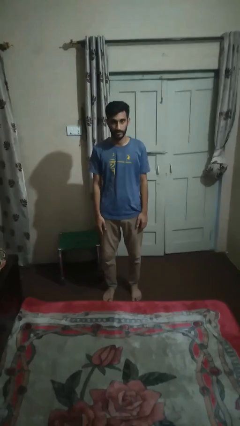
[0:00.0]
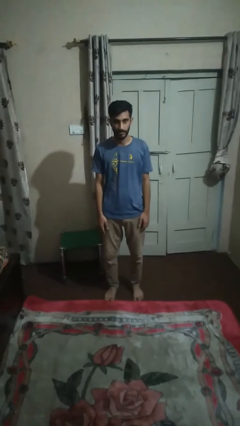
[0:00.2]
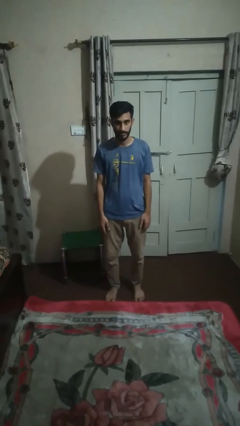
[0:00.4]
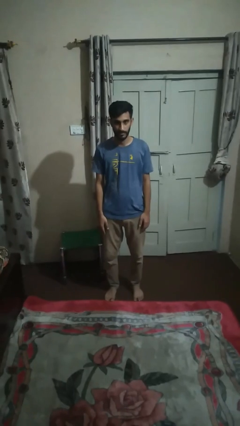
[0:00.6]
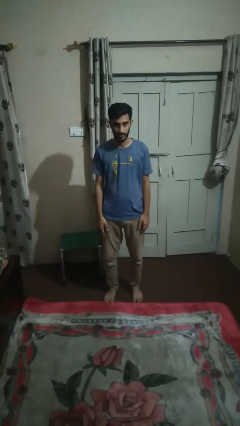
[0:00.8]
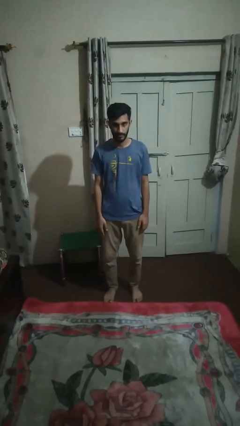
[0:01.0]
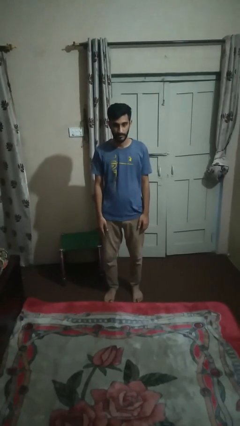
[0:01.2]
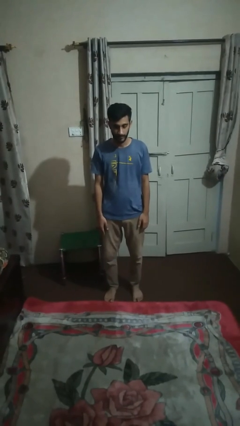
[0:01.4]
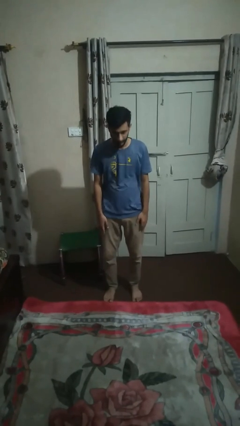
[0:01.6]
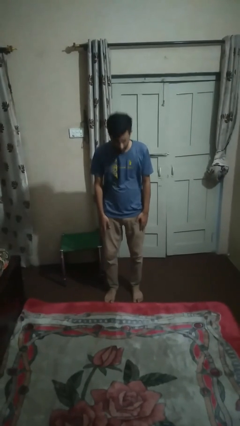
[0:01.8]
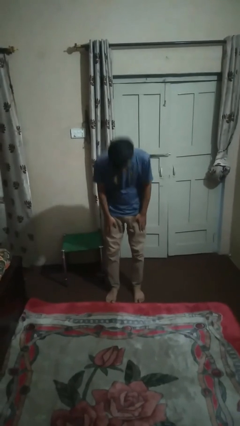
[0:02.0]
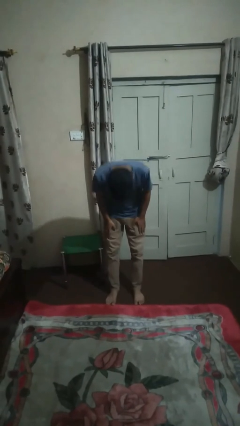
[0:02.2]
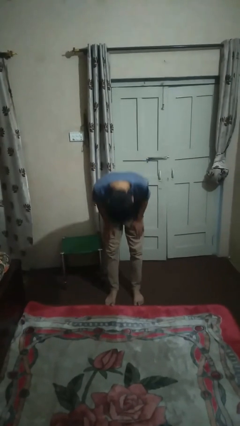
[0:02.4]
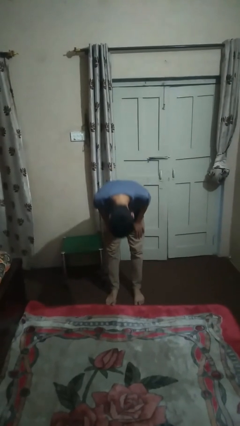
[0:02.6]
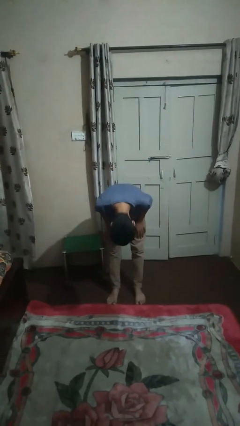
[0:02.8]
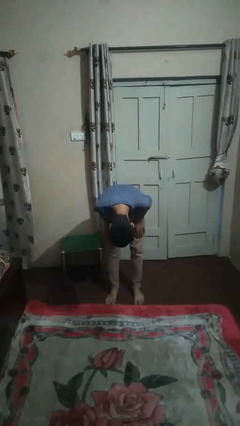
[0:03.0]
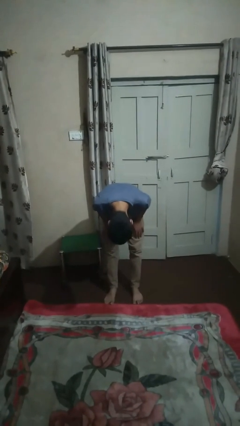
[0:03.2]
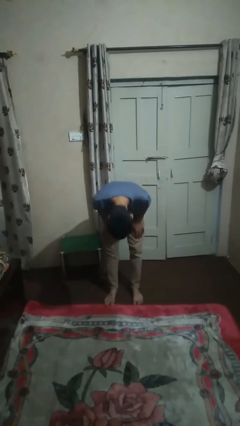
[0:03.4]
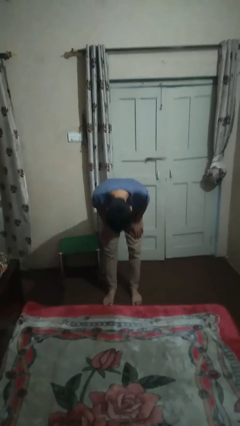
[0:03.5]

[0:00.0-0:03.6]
person bows

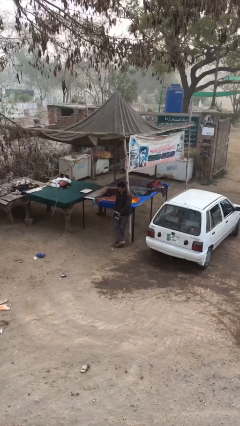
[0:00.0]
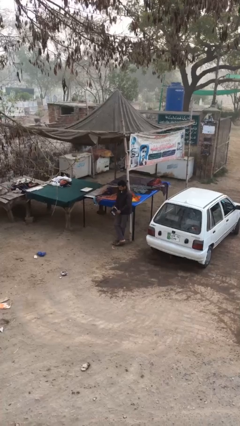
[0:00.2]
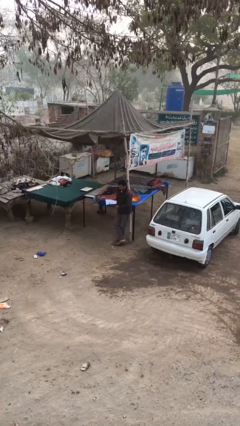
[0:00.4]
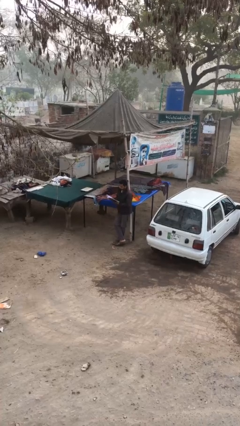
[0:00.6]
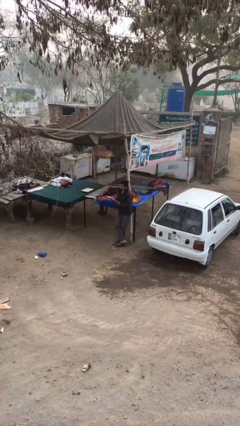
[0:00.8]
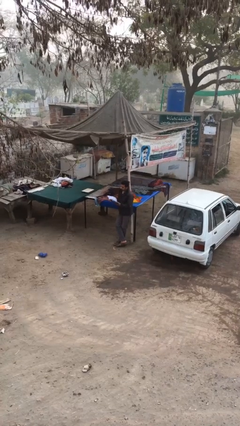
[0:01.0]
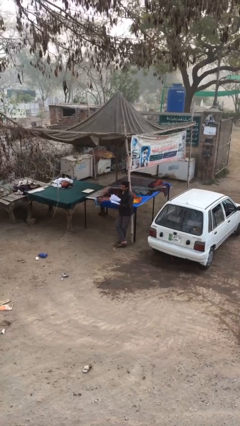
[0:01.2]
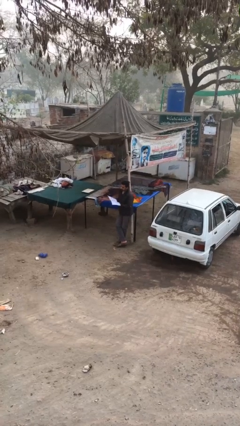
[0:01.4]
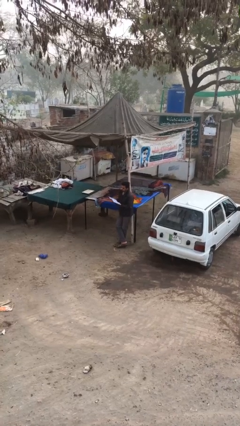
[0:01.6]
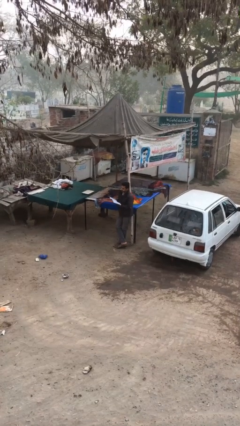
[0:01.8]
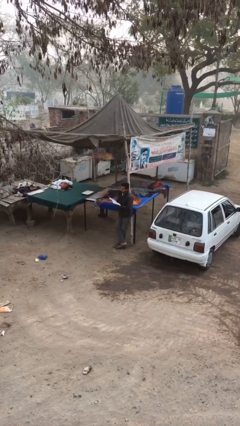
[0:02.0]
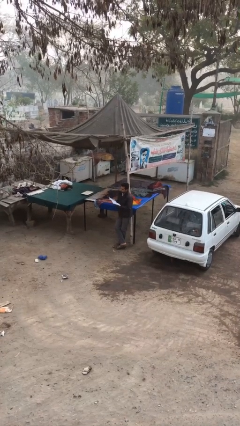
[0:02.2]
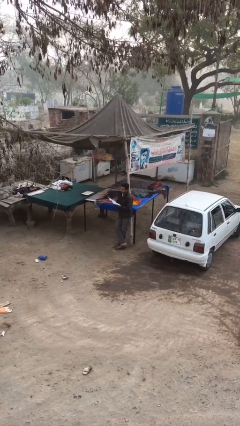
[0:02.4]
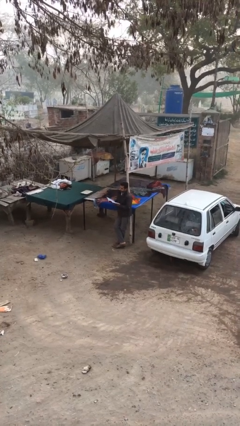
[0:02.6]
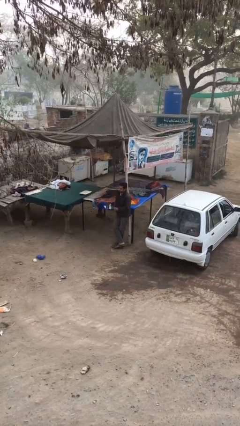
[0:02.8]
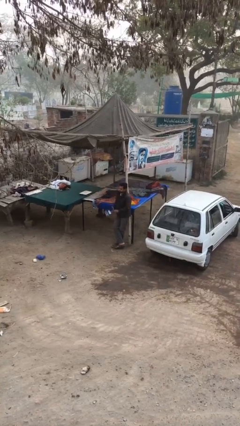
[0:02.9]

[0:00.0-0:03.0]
person reads document

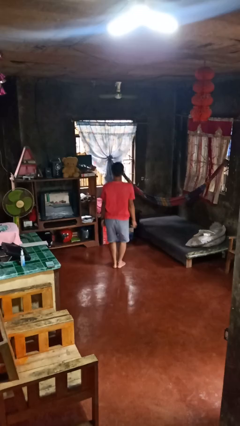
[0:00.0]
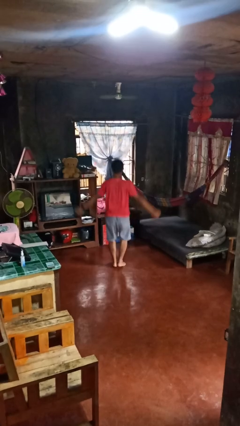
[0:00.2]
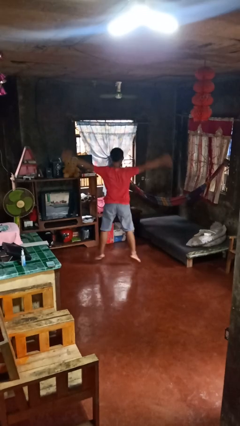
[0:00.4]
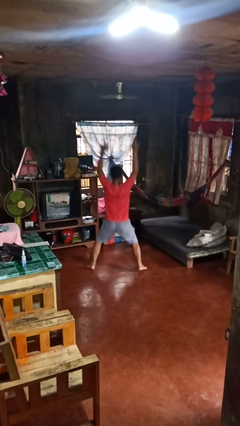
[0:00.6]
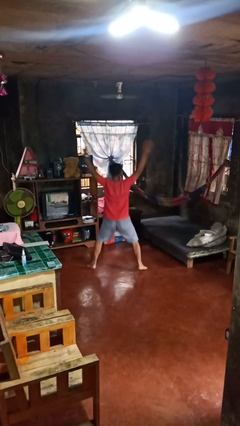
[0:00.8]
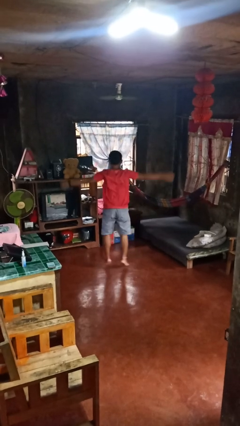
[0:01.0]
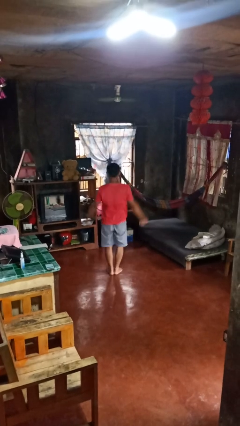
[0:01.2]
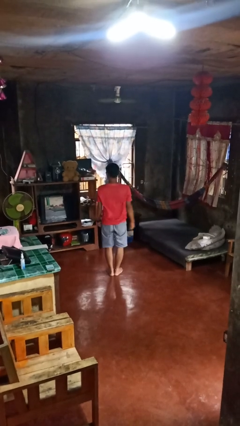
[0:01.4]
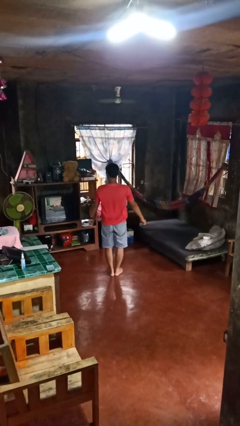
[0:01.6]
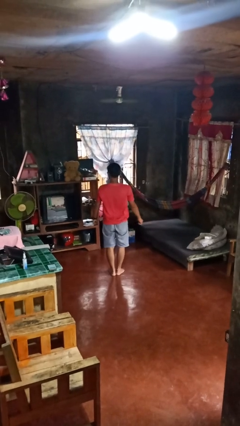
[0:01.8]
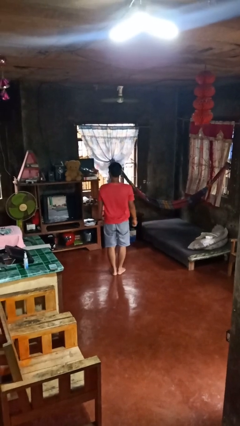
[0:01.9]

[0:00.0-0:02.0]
person exercises with jumping jacks

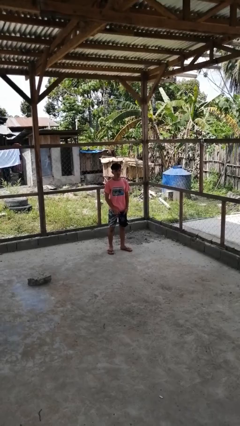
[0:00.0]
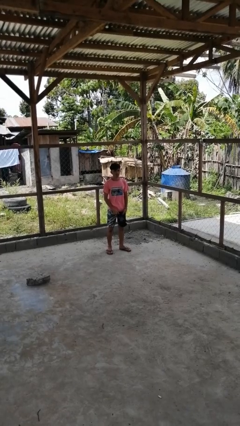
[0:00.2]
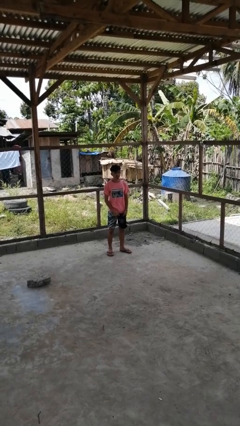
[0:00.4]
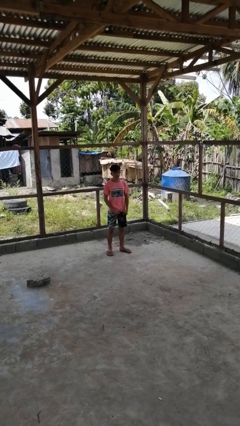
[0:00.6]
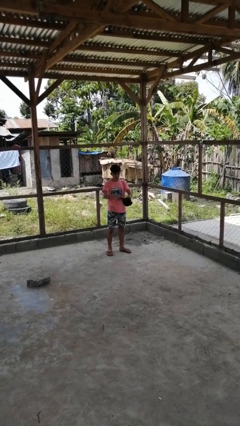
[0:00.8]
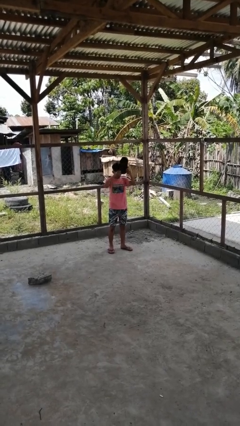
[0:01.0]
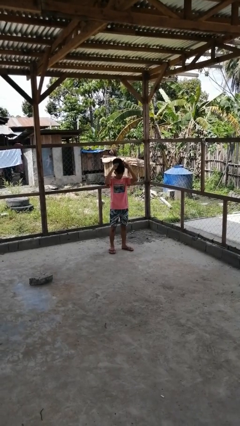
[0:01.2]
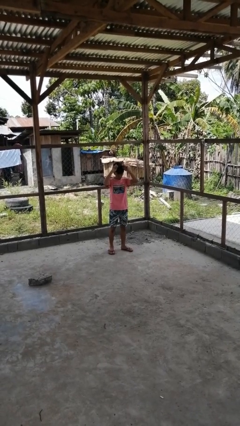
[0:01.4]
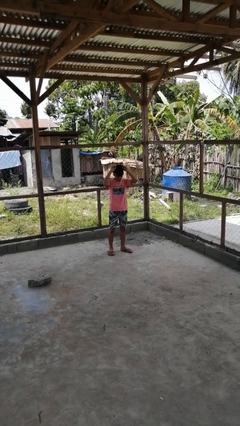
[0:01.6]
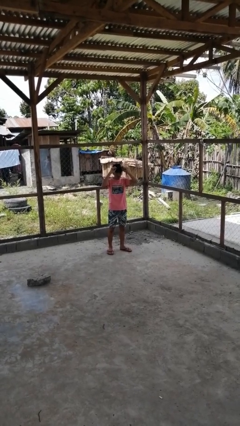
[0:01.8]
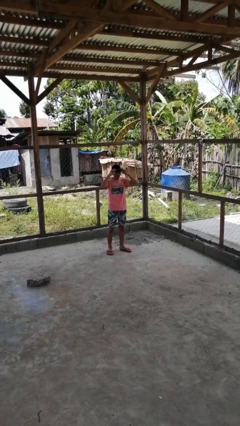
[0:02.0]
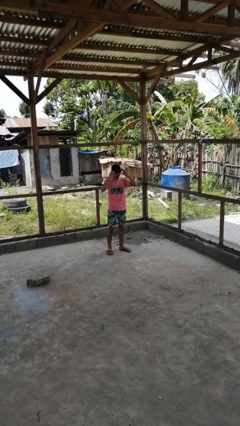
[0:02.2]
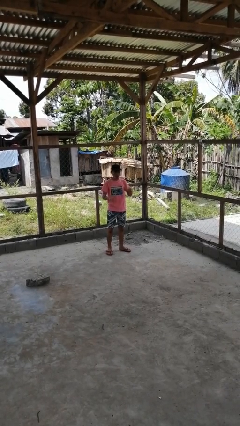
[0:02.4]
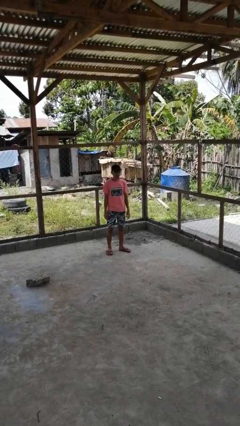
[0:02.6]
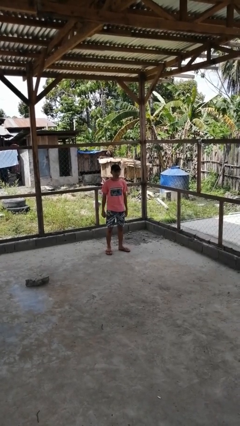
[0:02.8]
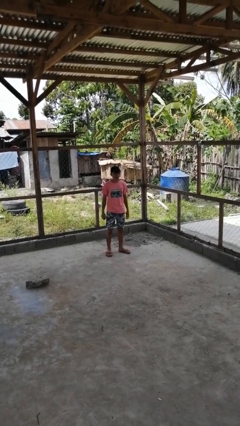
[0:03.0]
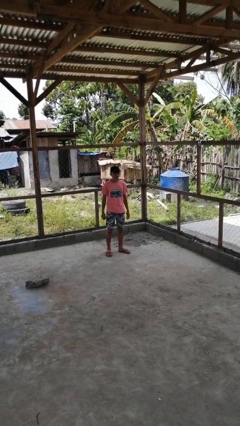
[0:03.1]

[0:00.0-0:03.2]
person puts on hat

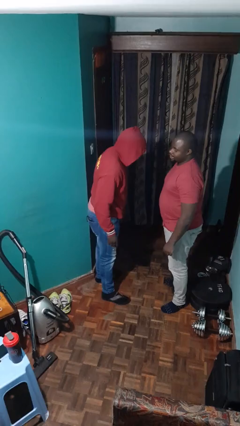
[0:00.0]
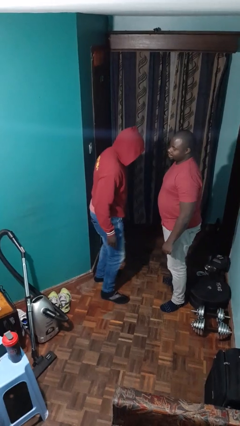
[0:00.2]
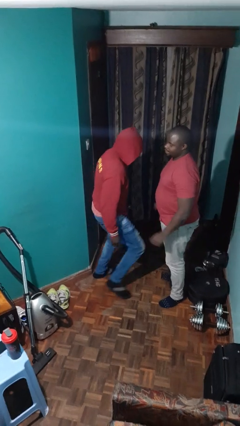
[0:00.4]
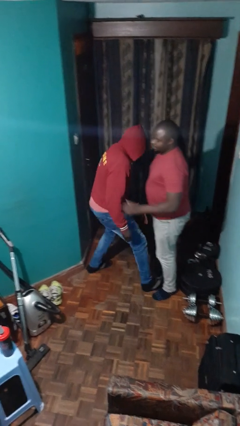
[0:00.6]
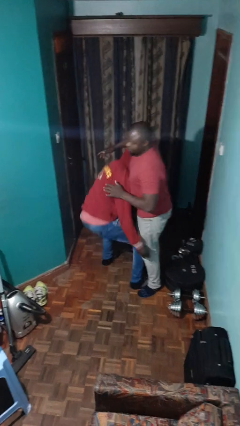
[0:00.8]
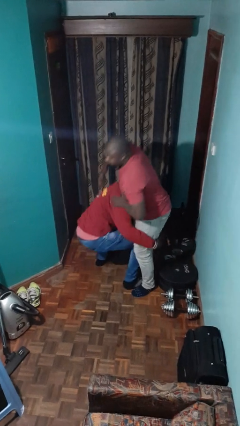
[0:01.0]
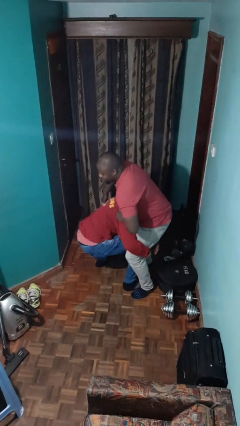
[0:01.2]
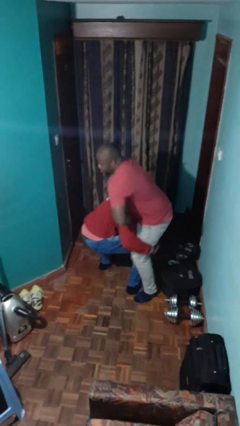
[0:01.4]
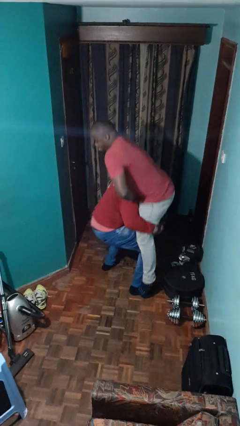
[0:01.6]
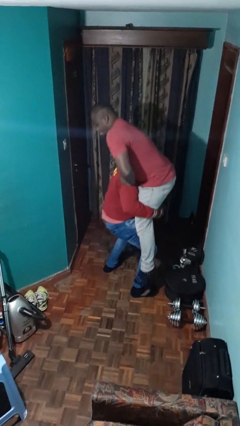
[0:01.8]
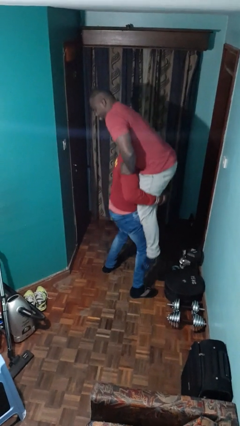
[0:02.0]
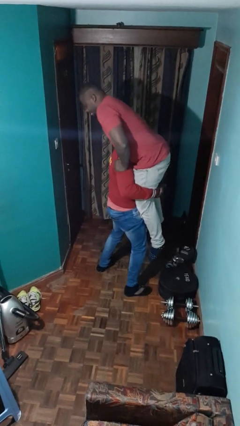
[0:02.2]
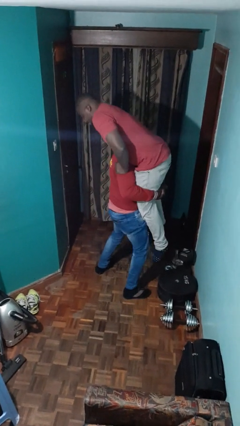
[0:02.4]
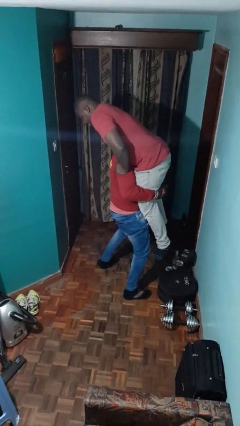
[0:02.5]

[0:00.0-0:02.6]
person picks up person

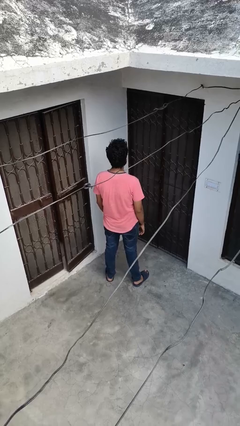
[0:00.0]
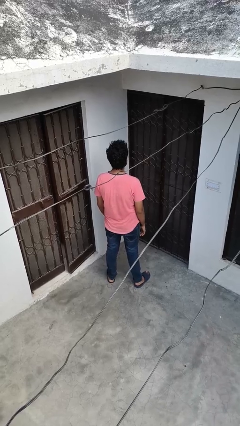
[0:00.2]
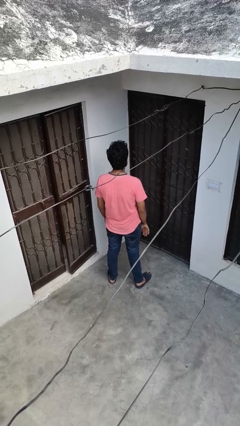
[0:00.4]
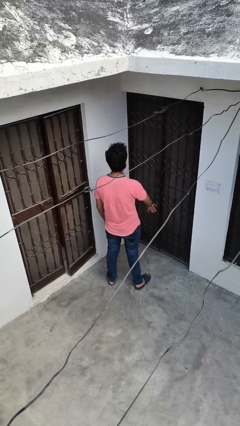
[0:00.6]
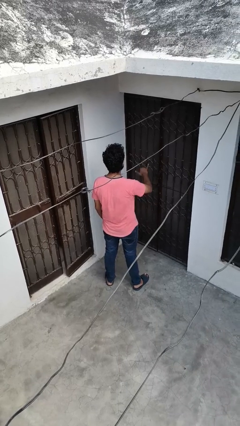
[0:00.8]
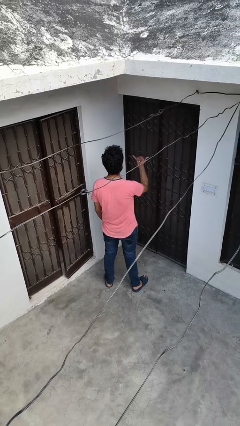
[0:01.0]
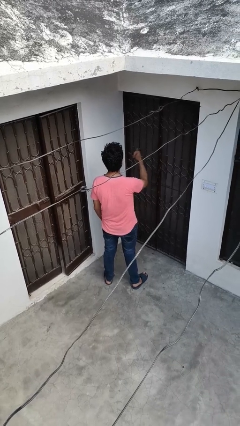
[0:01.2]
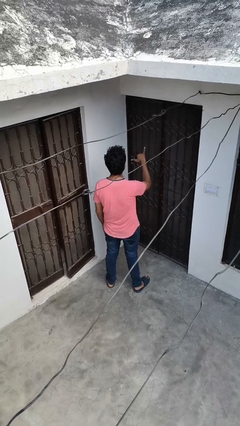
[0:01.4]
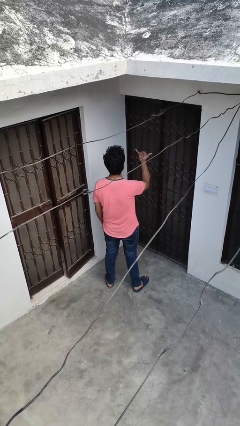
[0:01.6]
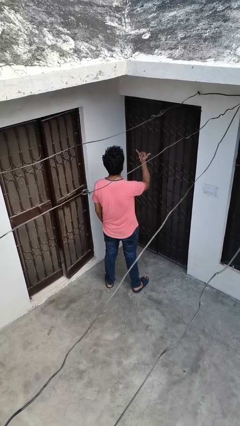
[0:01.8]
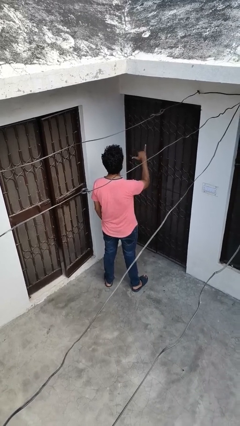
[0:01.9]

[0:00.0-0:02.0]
person gestures hang loose

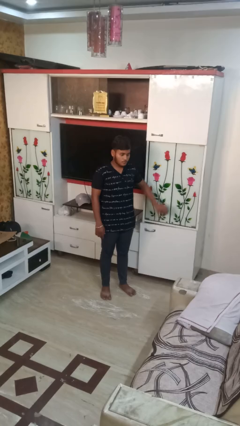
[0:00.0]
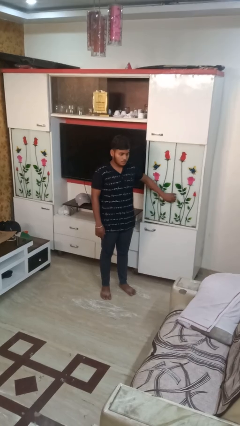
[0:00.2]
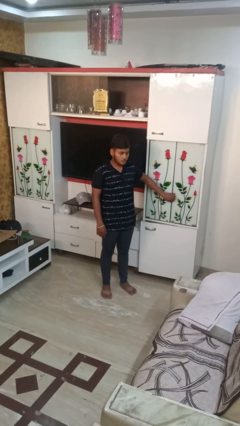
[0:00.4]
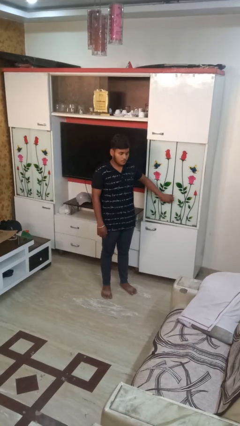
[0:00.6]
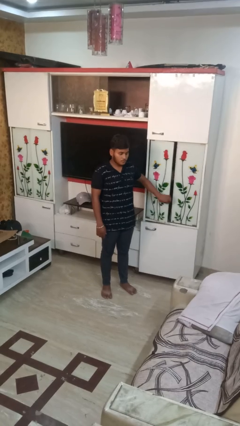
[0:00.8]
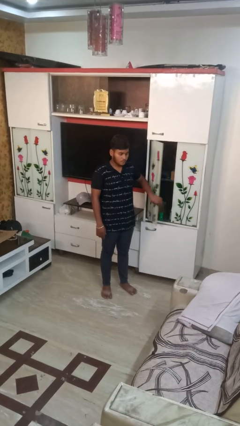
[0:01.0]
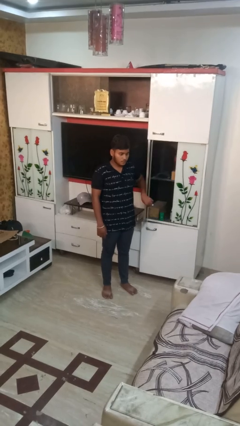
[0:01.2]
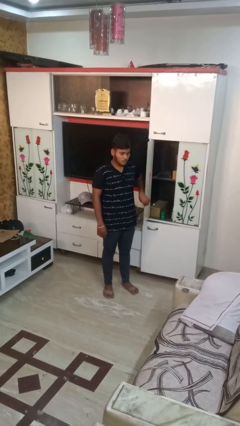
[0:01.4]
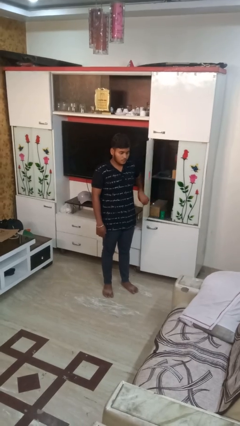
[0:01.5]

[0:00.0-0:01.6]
person opens closet door
